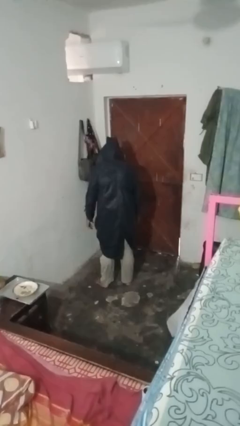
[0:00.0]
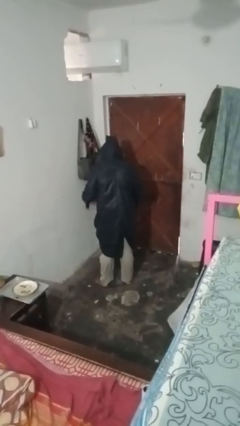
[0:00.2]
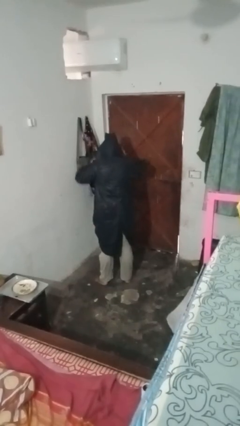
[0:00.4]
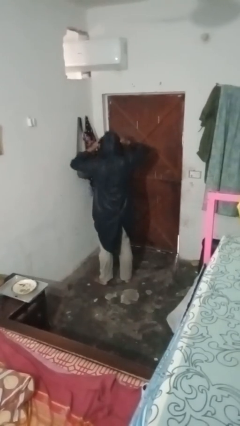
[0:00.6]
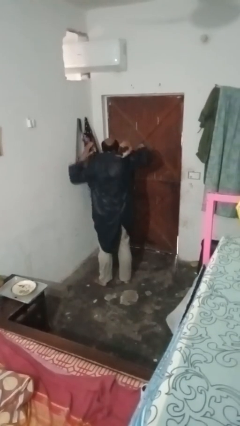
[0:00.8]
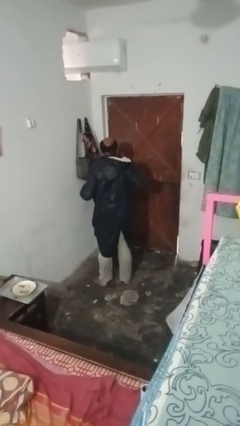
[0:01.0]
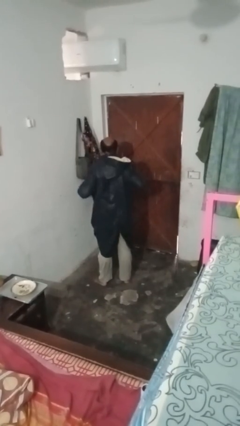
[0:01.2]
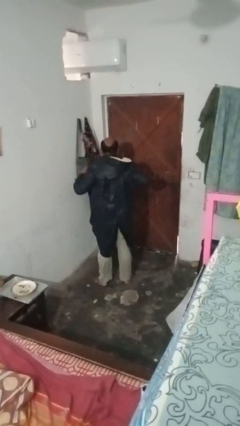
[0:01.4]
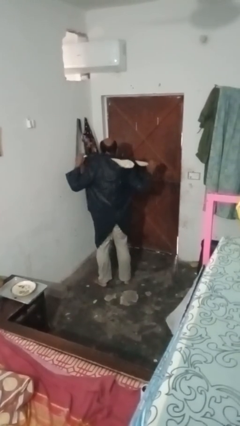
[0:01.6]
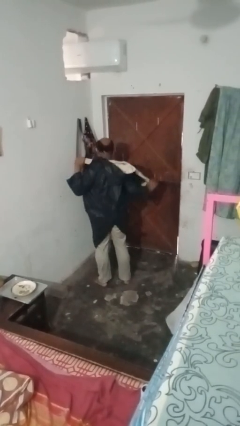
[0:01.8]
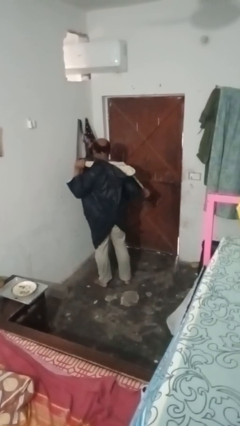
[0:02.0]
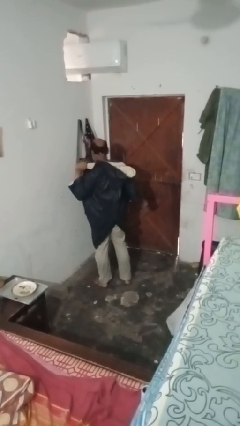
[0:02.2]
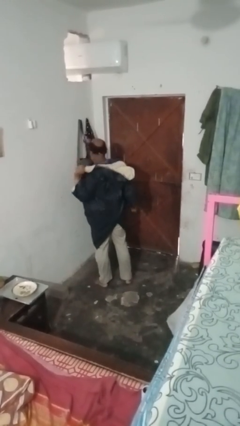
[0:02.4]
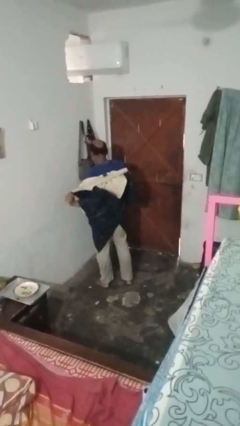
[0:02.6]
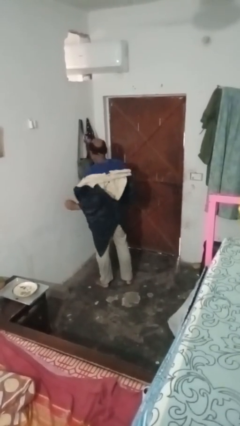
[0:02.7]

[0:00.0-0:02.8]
person takes off hoodie

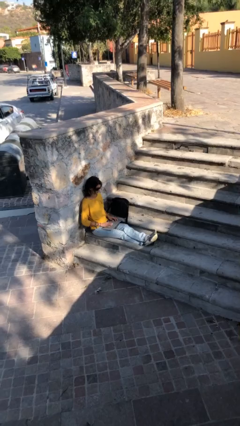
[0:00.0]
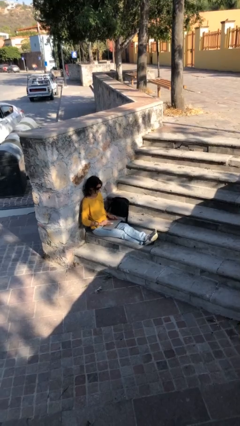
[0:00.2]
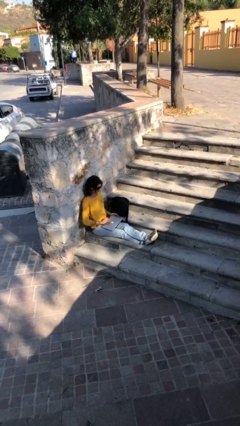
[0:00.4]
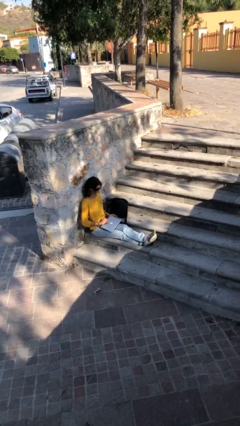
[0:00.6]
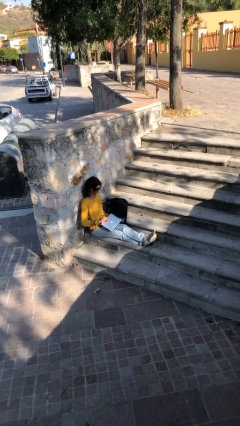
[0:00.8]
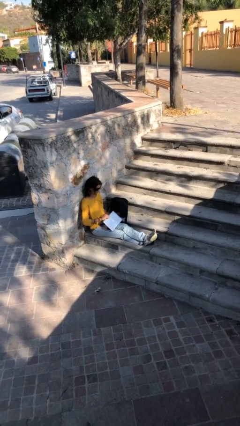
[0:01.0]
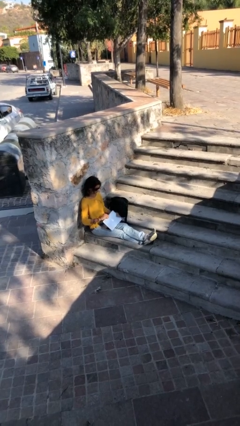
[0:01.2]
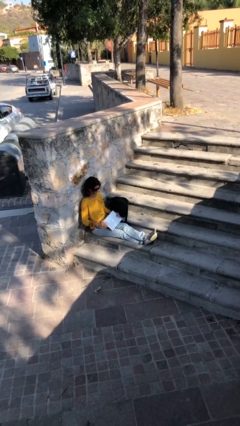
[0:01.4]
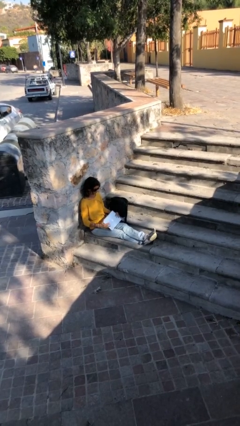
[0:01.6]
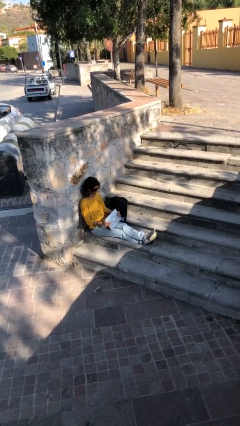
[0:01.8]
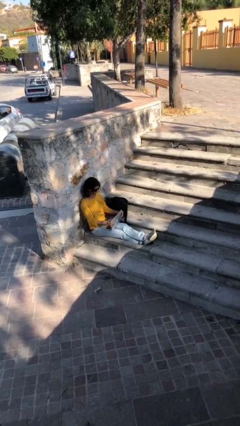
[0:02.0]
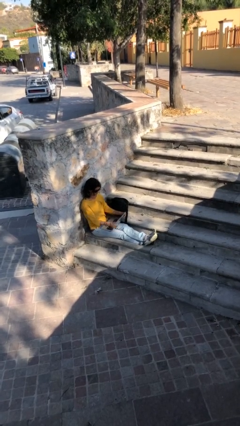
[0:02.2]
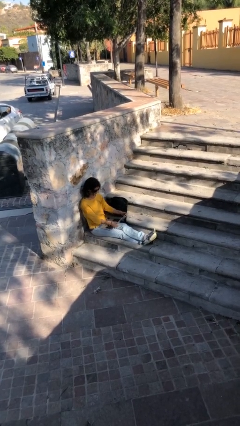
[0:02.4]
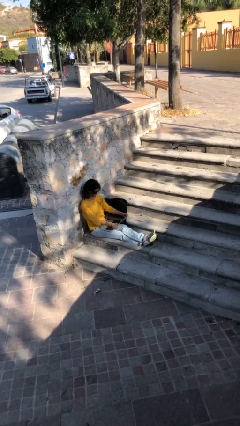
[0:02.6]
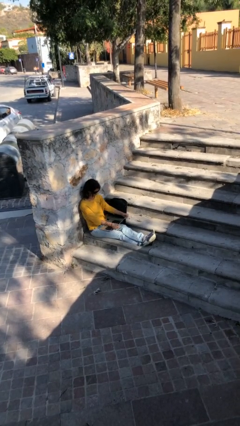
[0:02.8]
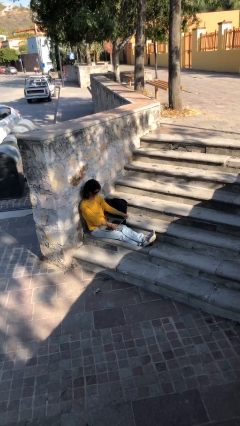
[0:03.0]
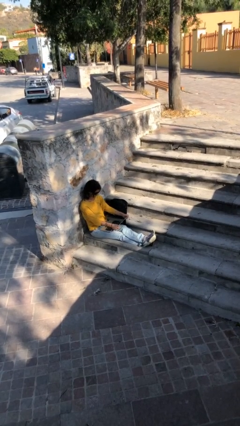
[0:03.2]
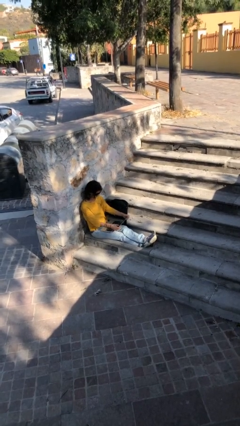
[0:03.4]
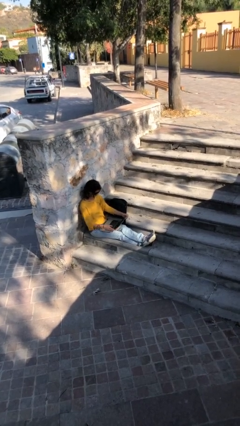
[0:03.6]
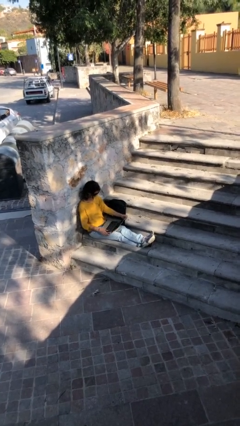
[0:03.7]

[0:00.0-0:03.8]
person interacts with laptop

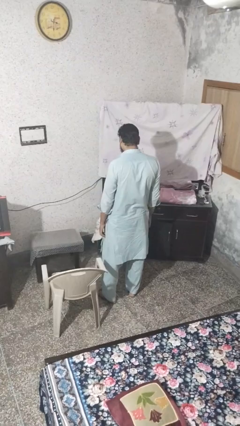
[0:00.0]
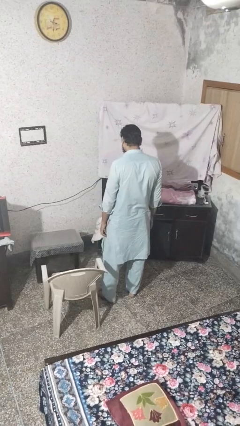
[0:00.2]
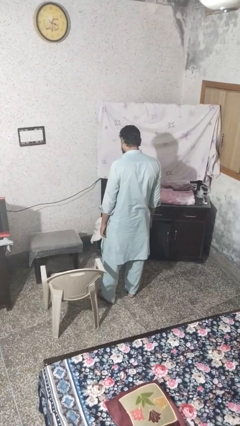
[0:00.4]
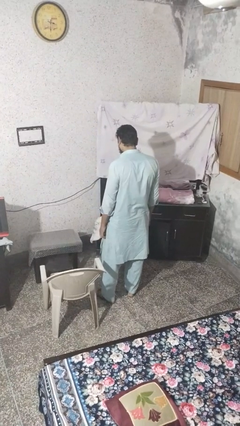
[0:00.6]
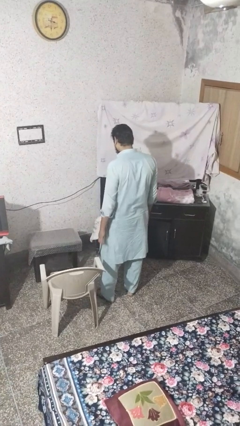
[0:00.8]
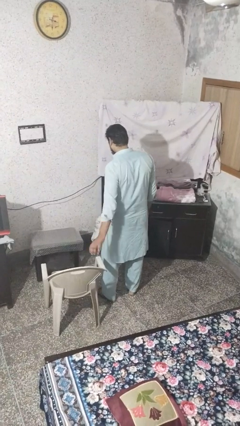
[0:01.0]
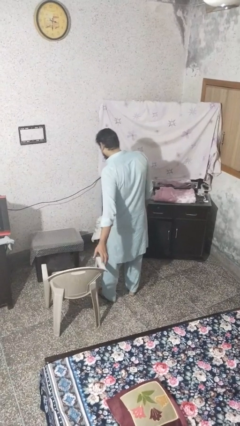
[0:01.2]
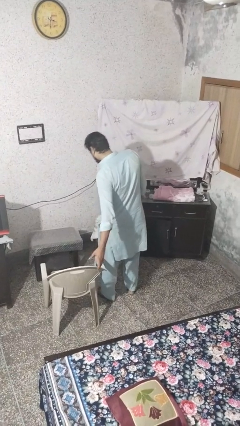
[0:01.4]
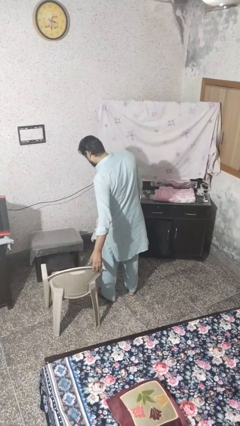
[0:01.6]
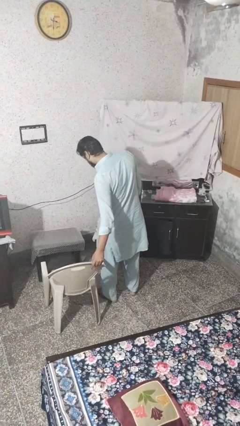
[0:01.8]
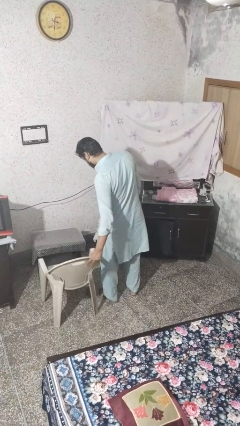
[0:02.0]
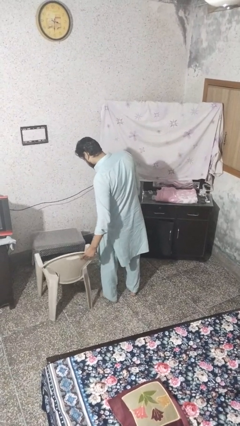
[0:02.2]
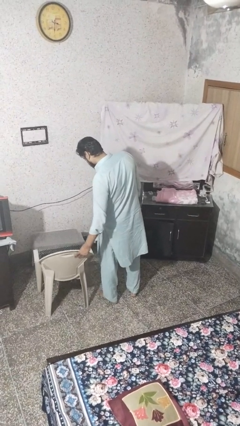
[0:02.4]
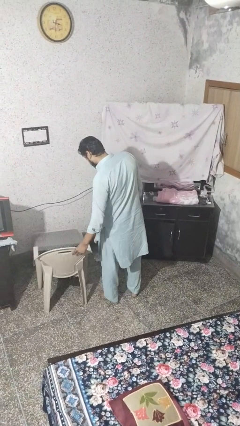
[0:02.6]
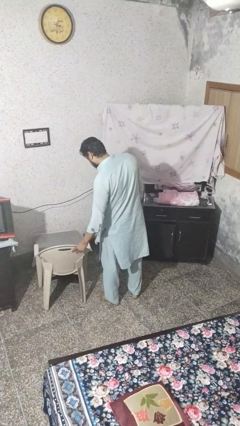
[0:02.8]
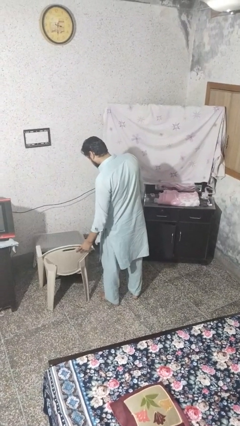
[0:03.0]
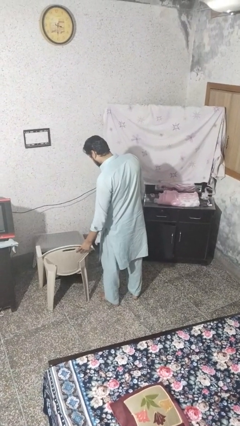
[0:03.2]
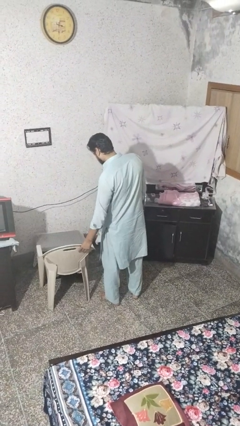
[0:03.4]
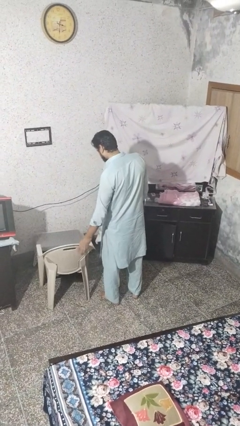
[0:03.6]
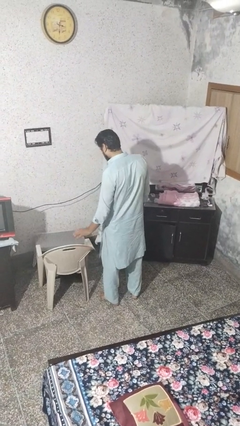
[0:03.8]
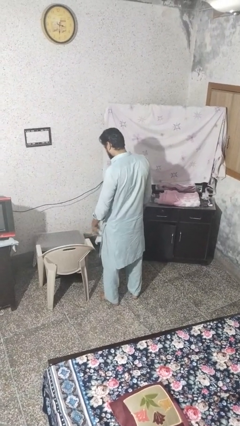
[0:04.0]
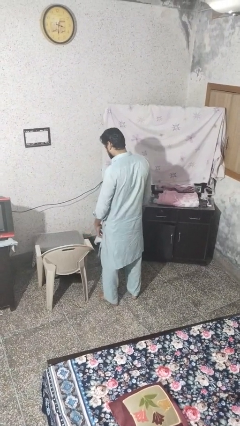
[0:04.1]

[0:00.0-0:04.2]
person pushes in chair

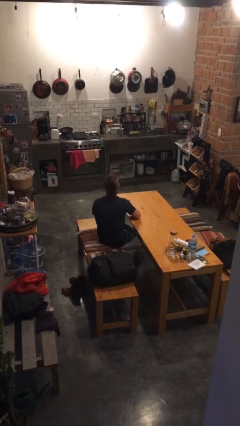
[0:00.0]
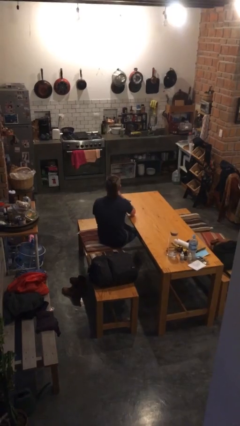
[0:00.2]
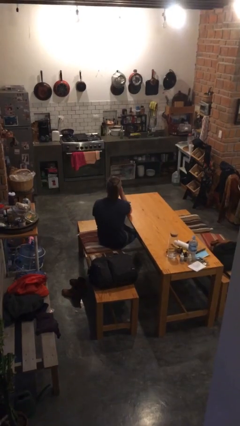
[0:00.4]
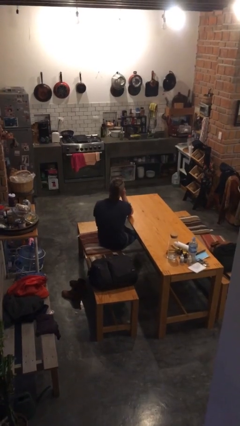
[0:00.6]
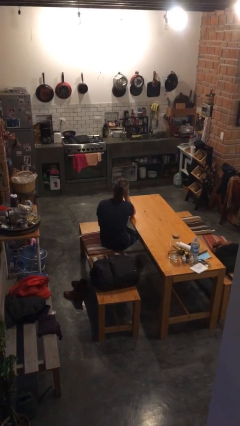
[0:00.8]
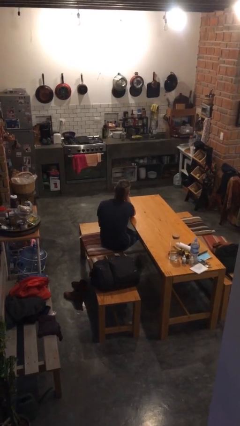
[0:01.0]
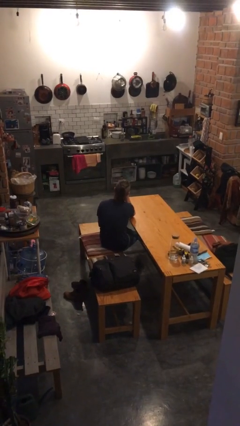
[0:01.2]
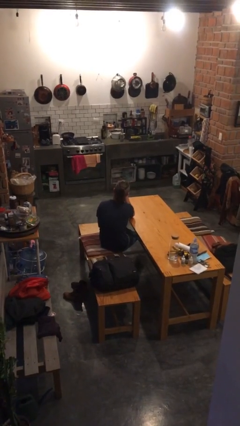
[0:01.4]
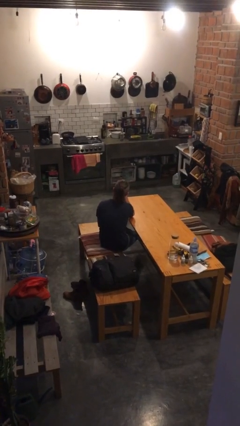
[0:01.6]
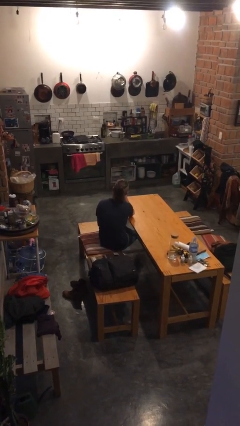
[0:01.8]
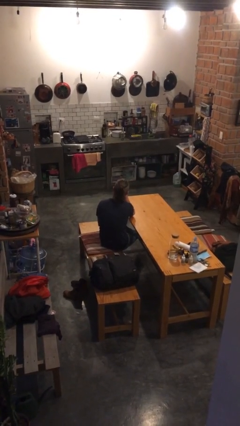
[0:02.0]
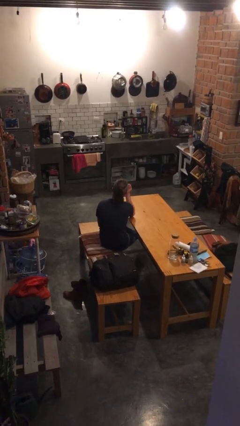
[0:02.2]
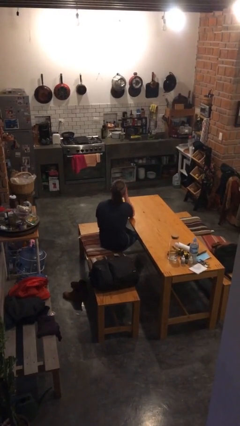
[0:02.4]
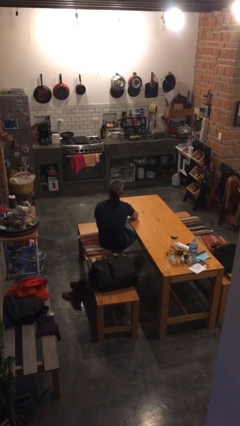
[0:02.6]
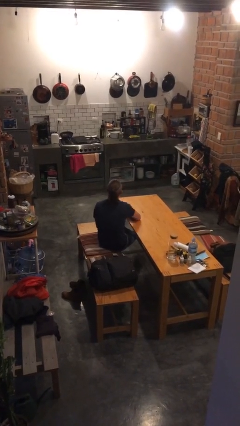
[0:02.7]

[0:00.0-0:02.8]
person licks fingers

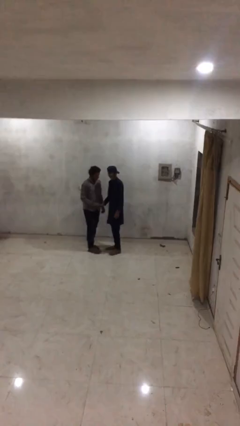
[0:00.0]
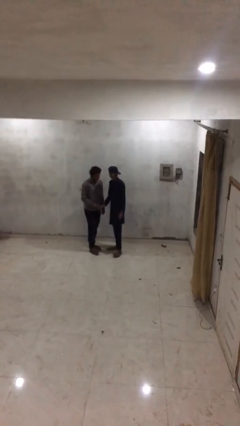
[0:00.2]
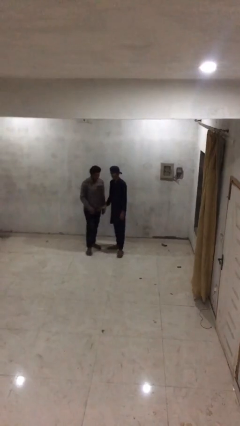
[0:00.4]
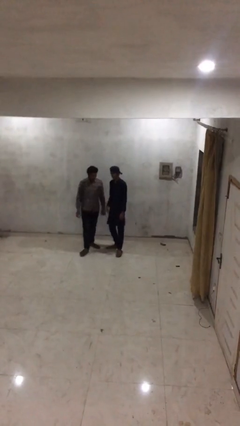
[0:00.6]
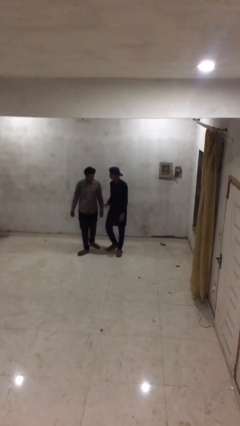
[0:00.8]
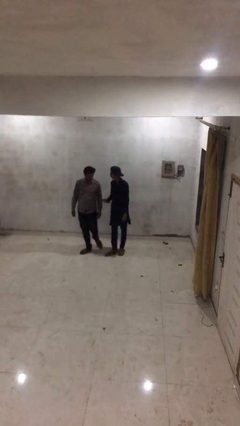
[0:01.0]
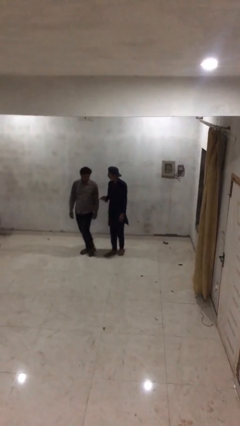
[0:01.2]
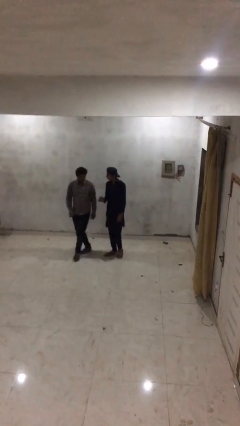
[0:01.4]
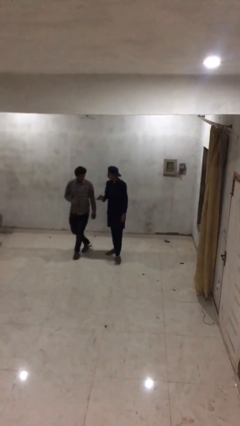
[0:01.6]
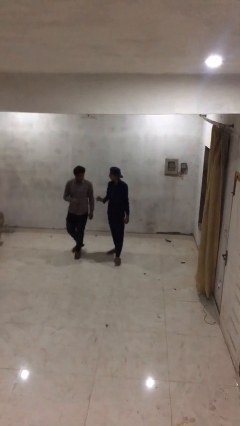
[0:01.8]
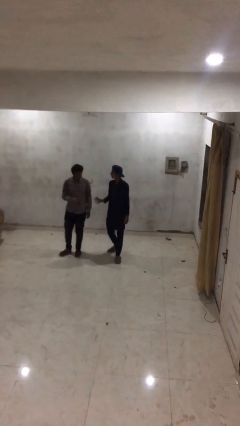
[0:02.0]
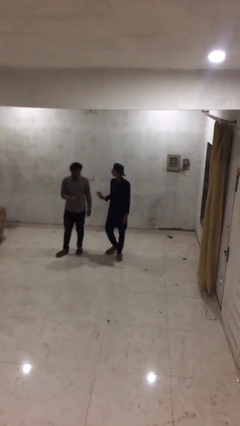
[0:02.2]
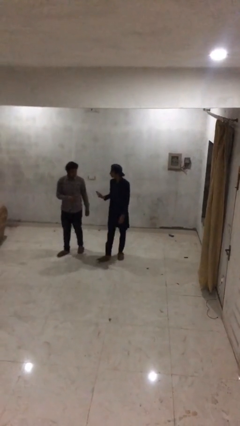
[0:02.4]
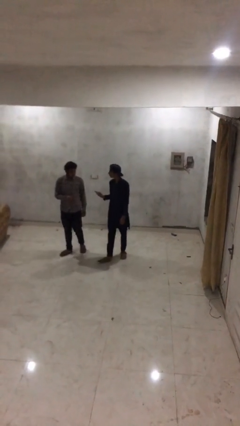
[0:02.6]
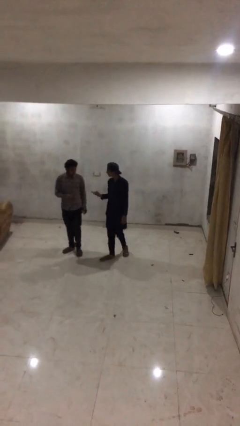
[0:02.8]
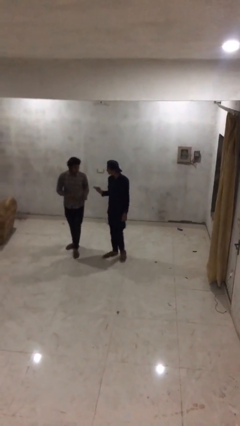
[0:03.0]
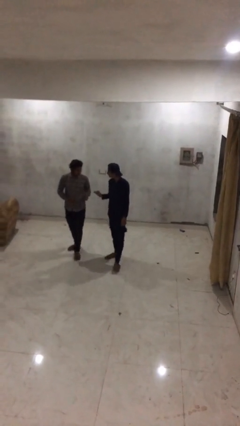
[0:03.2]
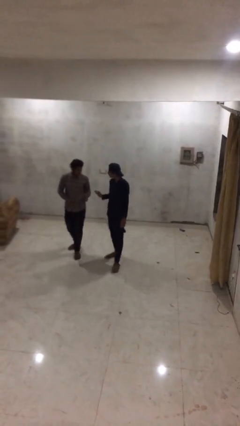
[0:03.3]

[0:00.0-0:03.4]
person talks to person

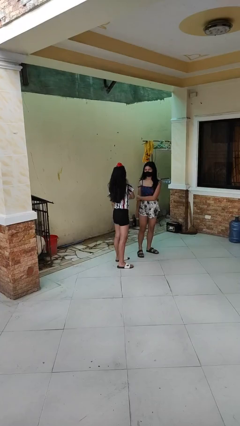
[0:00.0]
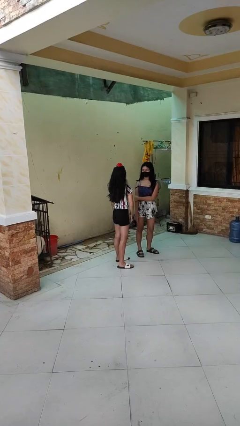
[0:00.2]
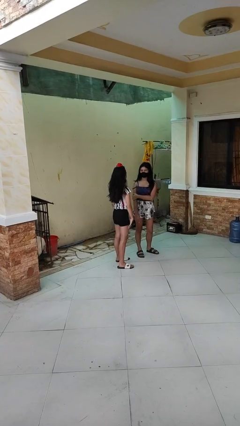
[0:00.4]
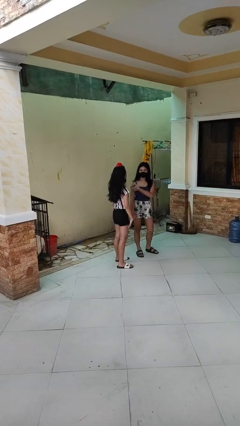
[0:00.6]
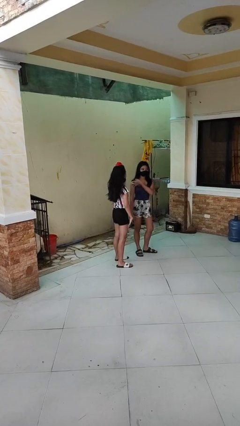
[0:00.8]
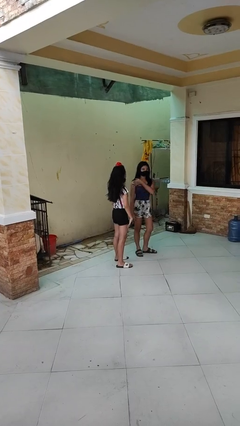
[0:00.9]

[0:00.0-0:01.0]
person spins person around
